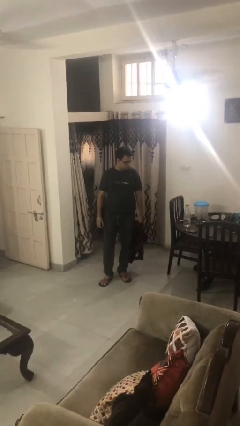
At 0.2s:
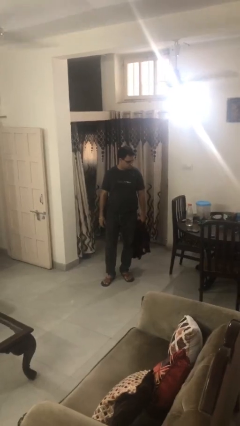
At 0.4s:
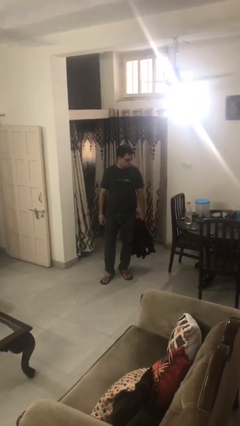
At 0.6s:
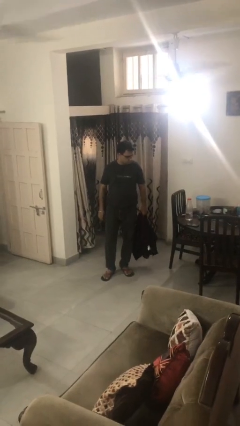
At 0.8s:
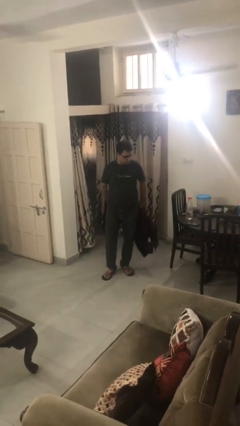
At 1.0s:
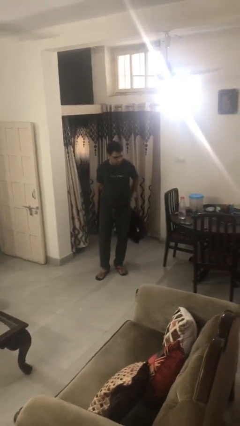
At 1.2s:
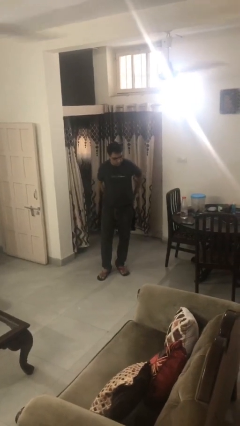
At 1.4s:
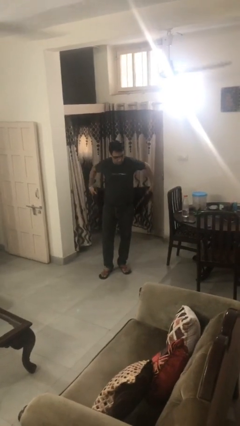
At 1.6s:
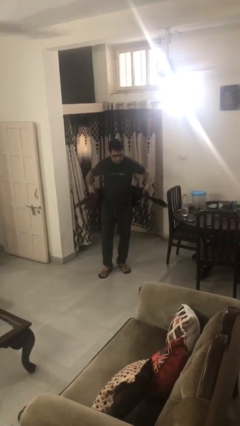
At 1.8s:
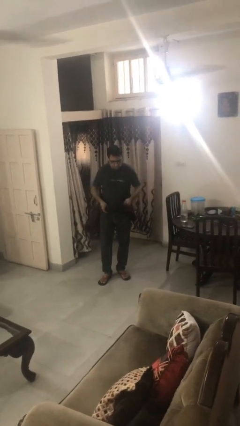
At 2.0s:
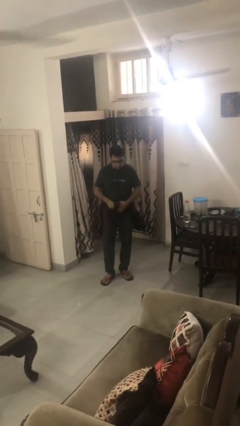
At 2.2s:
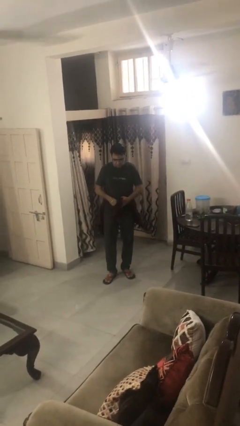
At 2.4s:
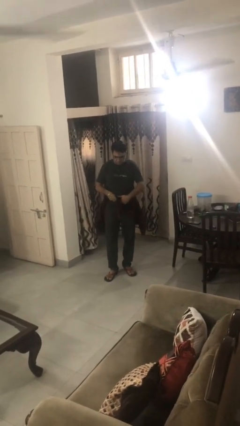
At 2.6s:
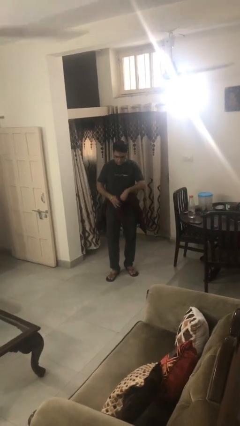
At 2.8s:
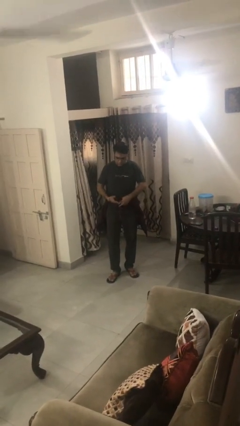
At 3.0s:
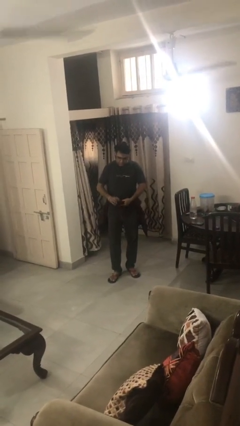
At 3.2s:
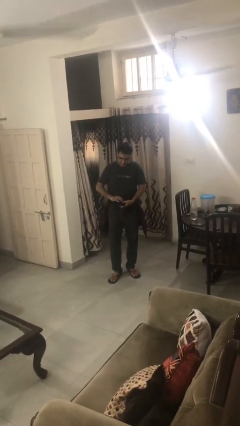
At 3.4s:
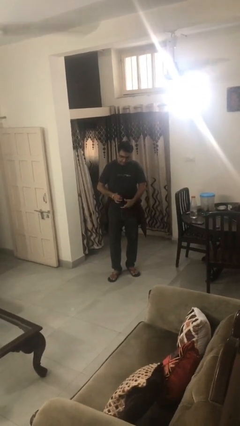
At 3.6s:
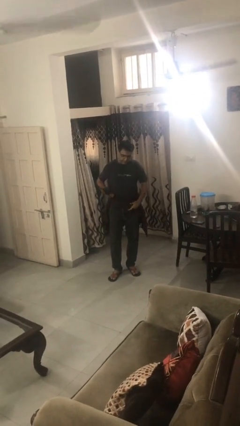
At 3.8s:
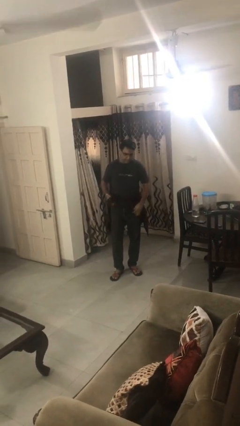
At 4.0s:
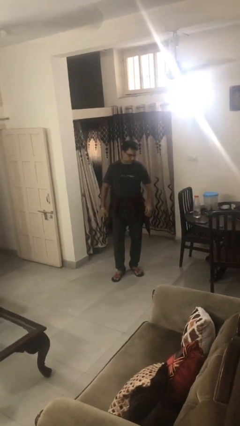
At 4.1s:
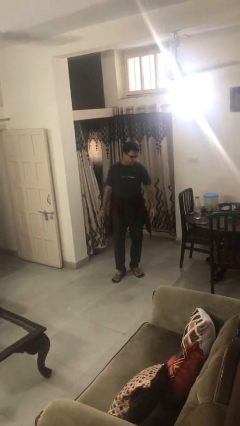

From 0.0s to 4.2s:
person ties jacket around waist

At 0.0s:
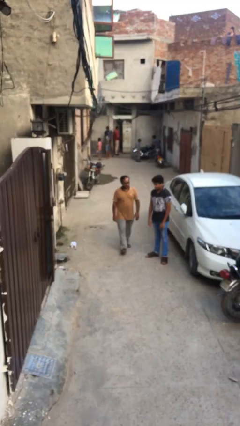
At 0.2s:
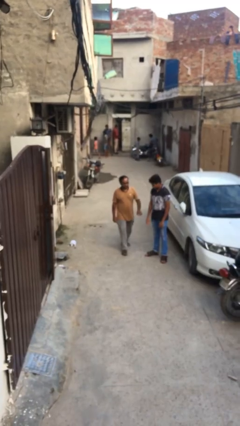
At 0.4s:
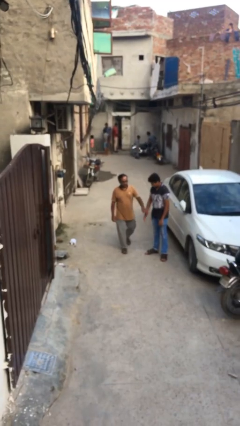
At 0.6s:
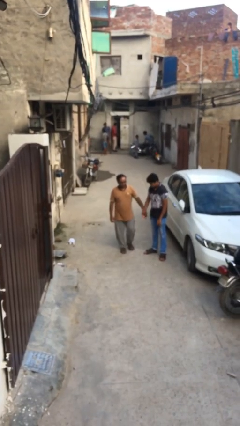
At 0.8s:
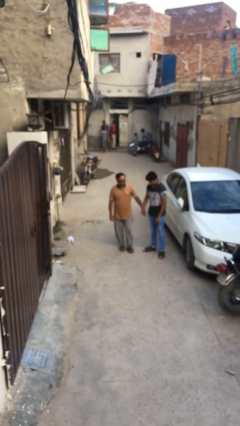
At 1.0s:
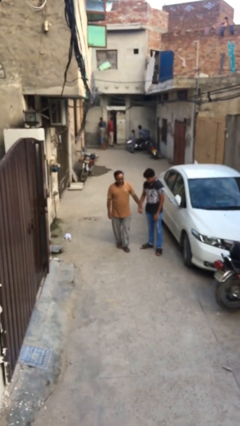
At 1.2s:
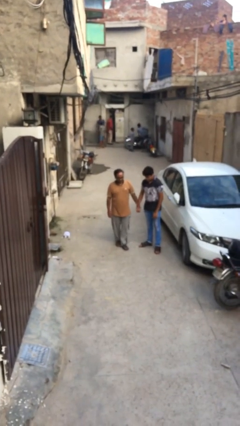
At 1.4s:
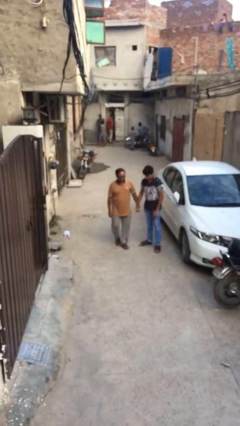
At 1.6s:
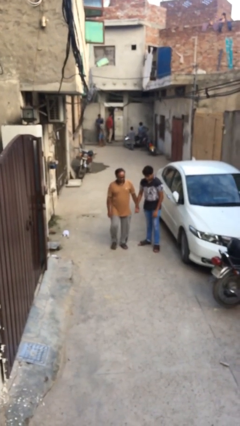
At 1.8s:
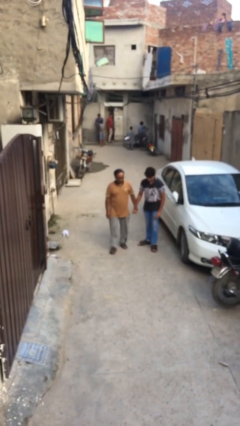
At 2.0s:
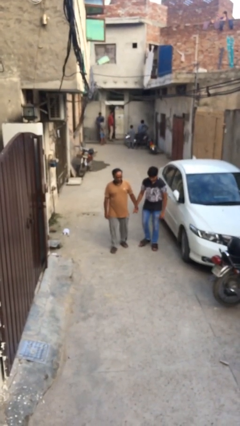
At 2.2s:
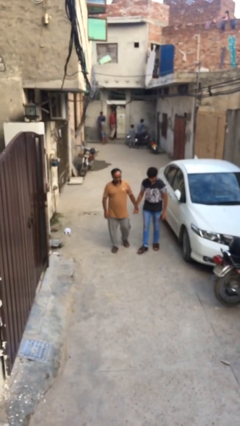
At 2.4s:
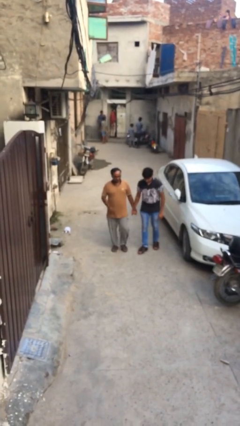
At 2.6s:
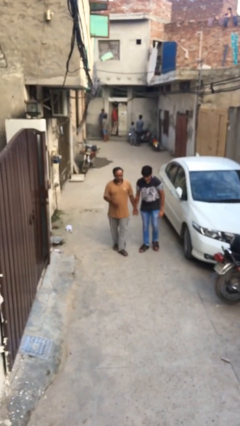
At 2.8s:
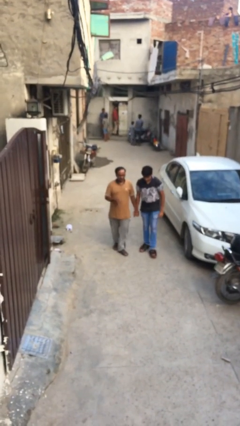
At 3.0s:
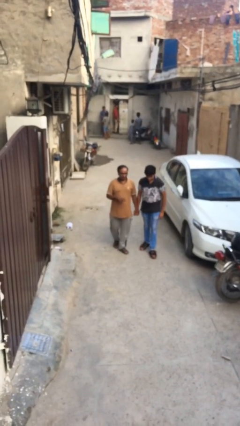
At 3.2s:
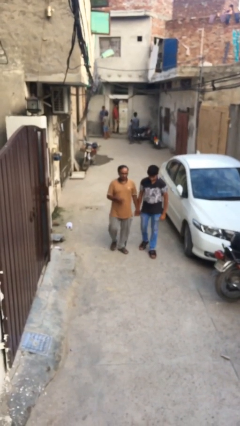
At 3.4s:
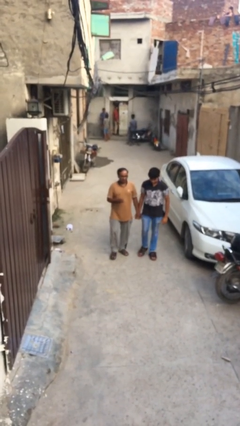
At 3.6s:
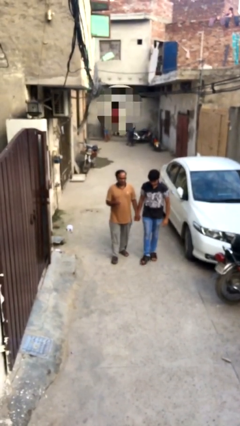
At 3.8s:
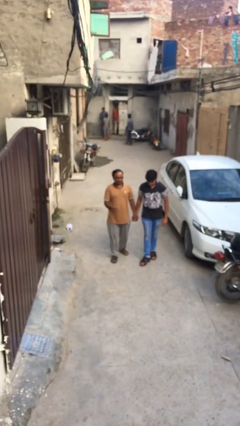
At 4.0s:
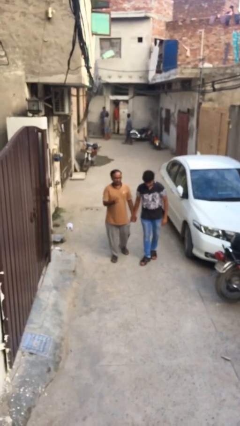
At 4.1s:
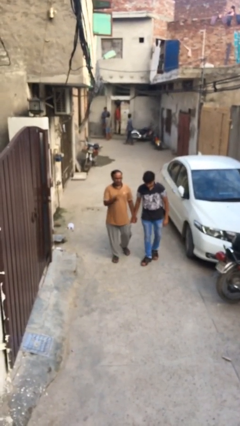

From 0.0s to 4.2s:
person holds hand

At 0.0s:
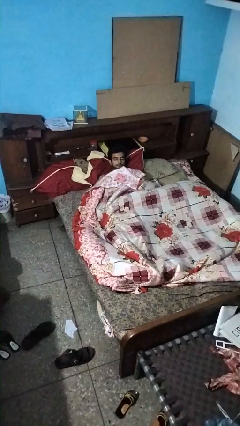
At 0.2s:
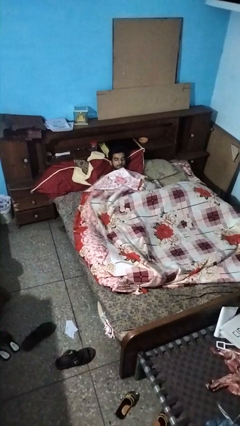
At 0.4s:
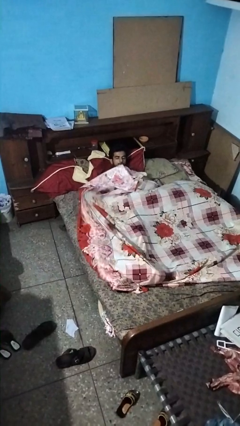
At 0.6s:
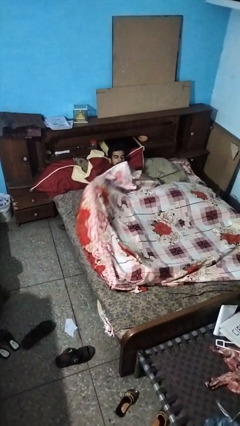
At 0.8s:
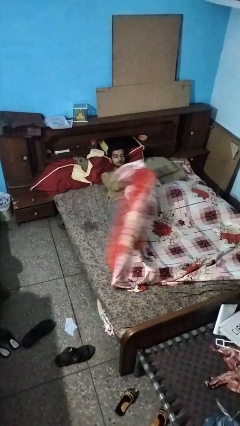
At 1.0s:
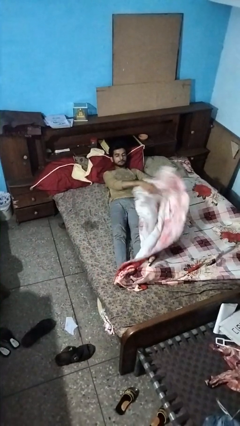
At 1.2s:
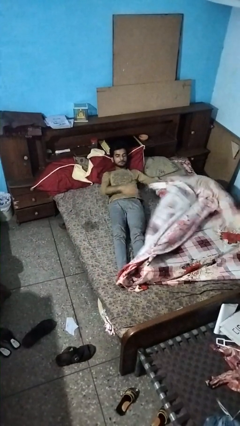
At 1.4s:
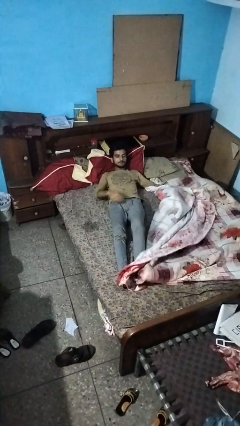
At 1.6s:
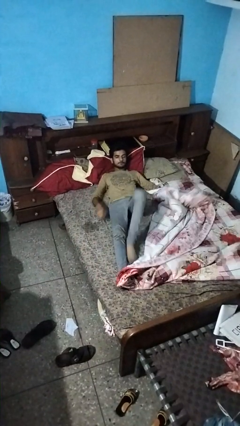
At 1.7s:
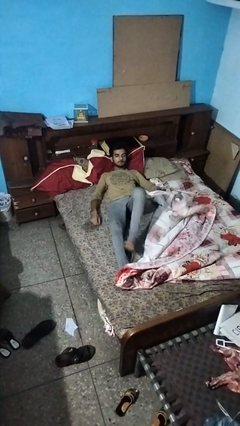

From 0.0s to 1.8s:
person uncovers with bedsheets

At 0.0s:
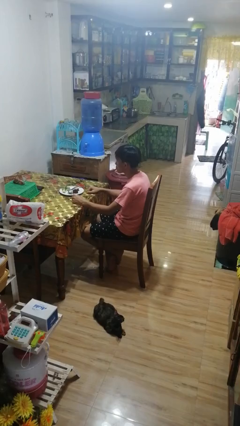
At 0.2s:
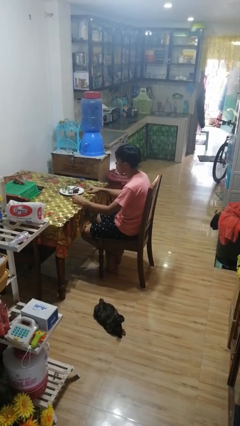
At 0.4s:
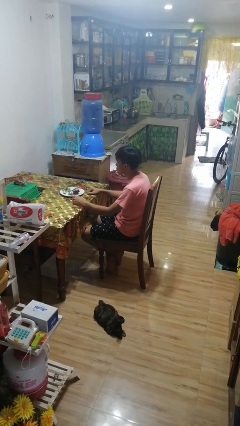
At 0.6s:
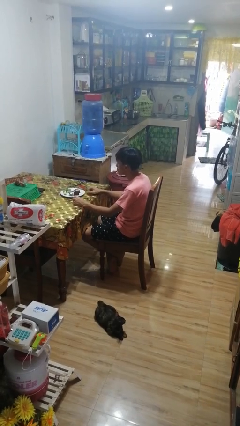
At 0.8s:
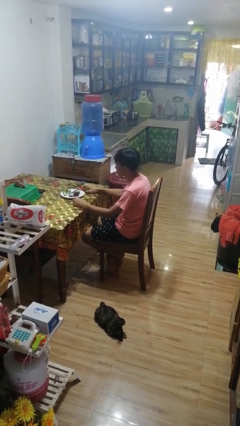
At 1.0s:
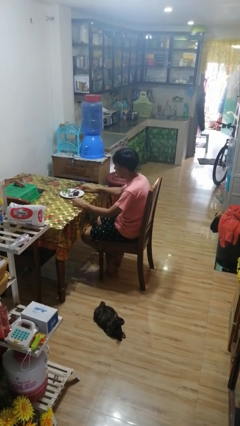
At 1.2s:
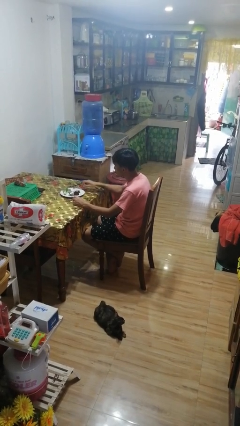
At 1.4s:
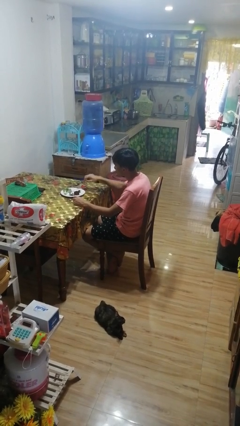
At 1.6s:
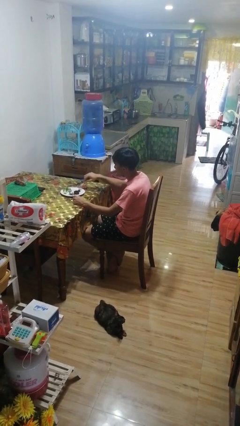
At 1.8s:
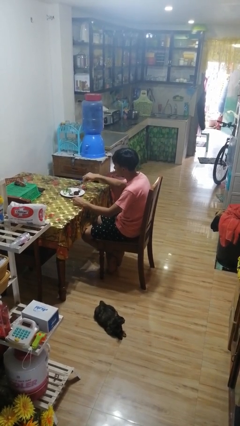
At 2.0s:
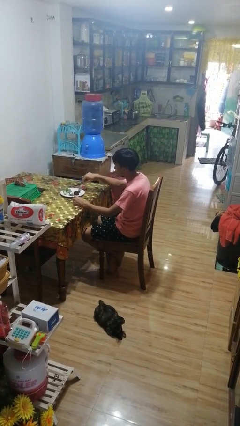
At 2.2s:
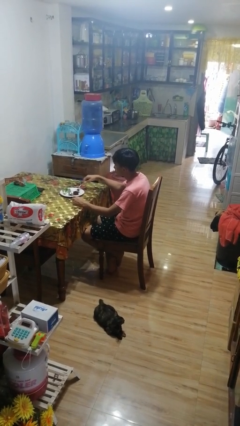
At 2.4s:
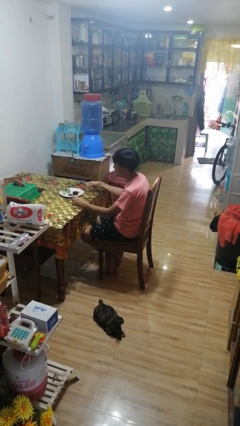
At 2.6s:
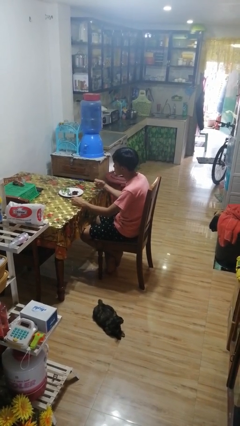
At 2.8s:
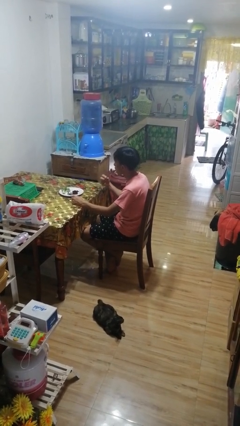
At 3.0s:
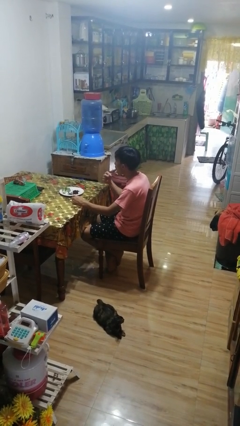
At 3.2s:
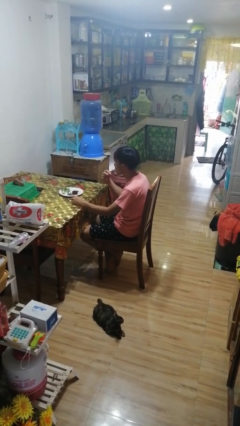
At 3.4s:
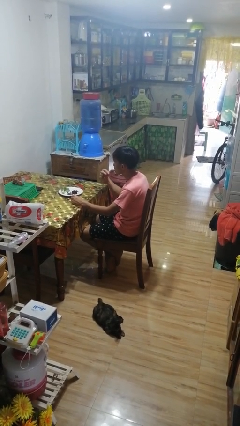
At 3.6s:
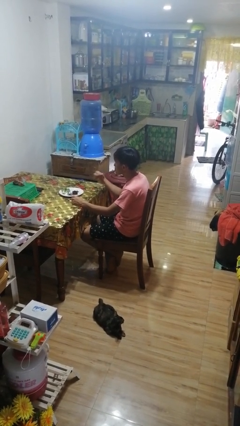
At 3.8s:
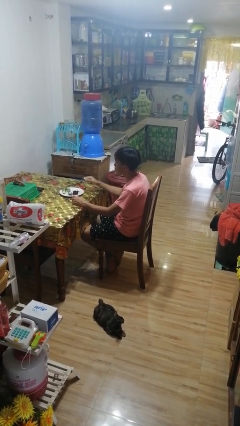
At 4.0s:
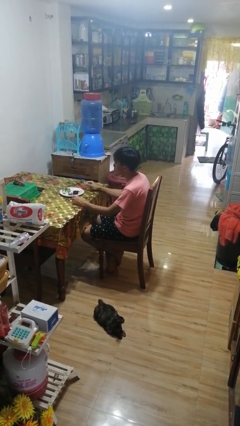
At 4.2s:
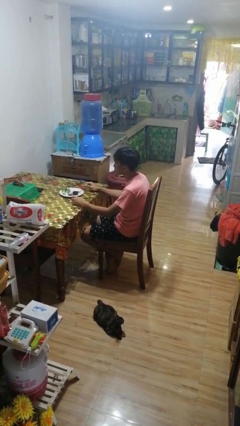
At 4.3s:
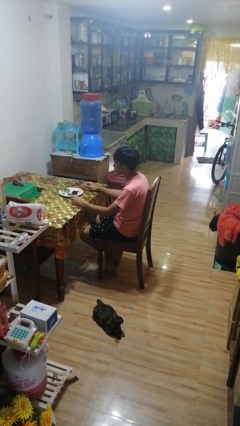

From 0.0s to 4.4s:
person eats with utensil

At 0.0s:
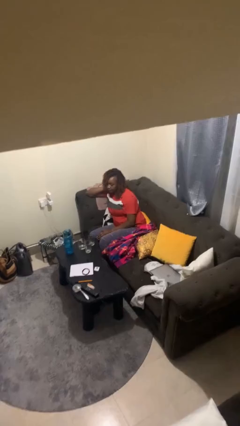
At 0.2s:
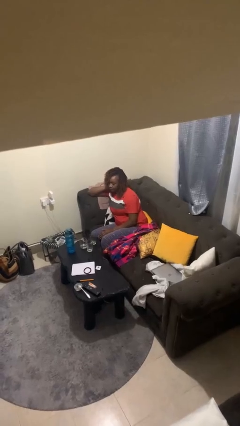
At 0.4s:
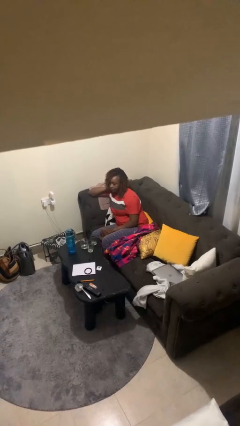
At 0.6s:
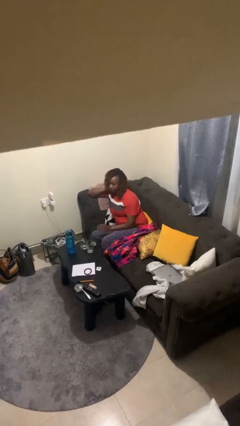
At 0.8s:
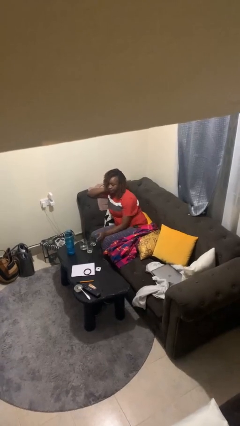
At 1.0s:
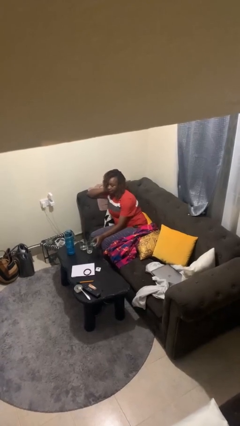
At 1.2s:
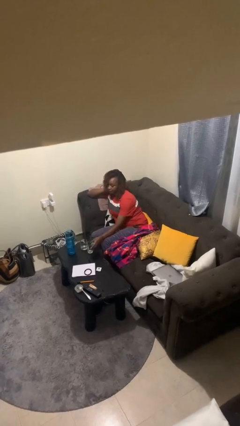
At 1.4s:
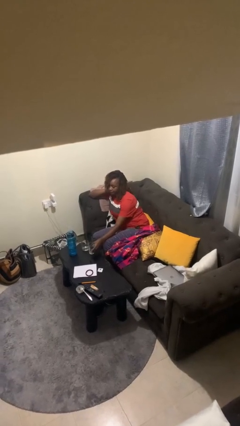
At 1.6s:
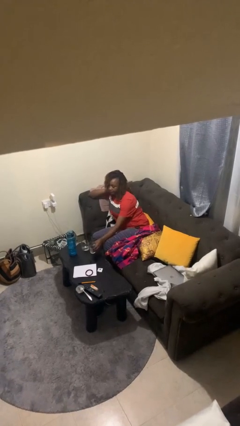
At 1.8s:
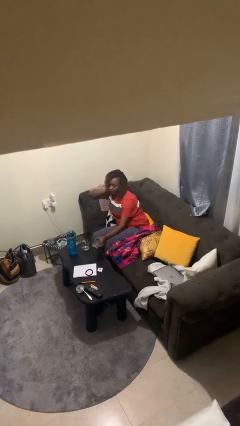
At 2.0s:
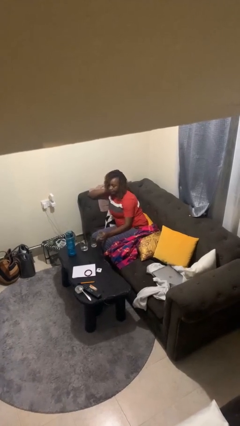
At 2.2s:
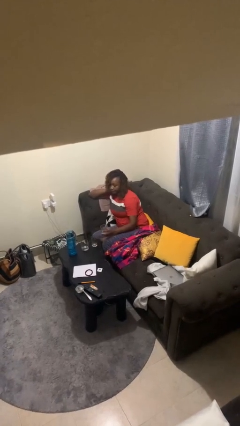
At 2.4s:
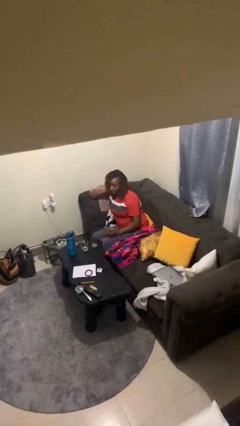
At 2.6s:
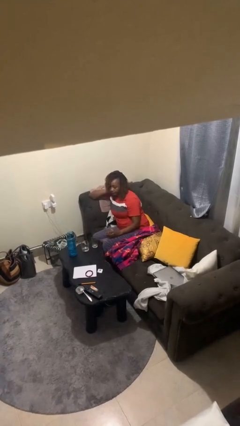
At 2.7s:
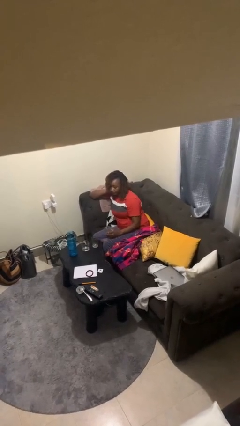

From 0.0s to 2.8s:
person picks up object from table

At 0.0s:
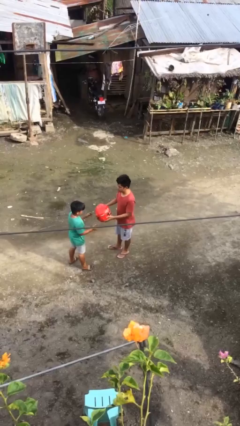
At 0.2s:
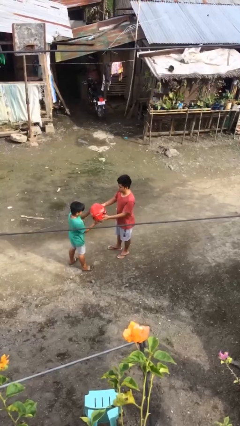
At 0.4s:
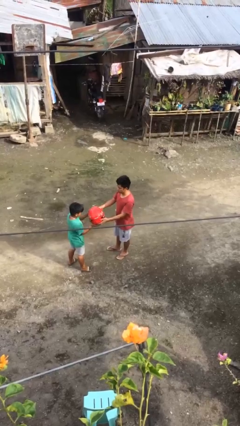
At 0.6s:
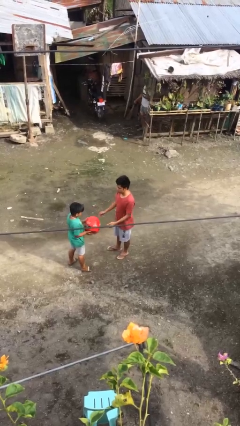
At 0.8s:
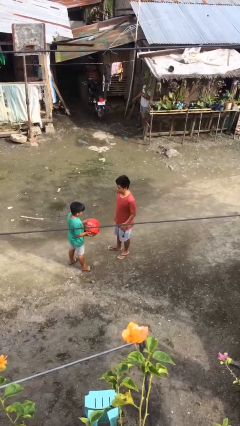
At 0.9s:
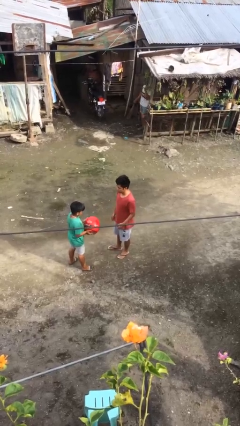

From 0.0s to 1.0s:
person transfers object to person
